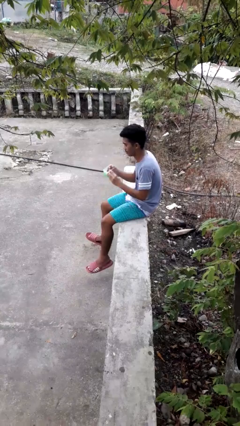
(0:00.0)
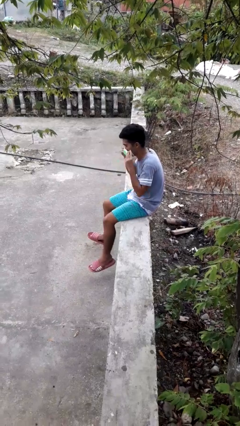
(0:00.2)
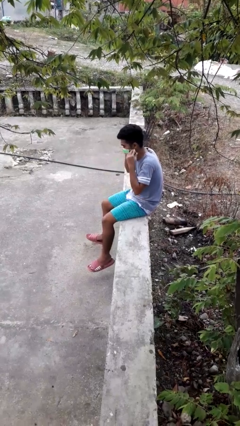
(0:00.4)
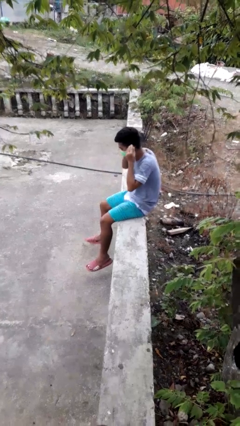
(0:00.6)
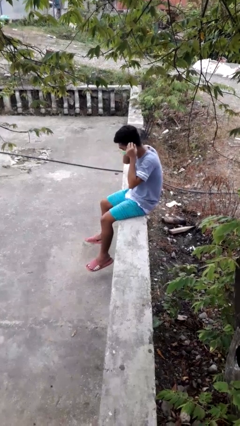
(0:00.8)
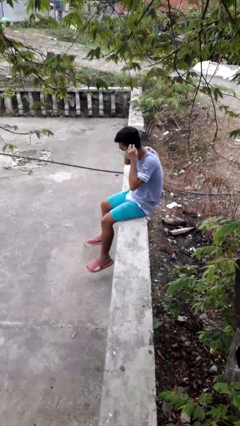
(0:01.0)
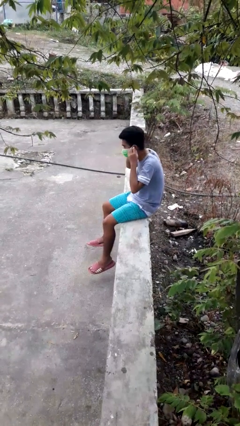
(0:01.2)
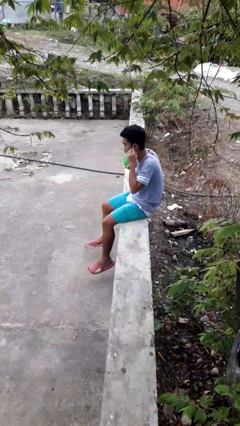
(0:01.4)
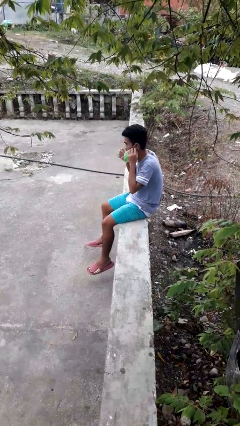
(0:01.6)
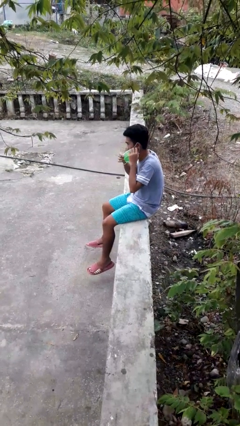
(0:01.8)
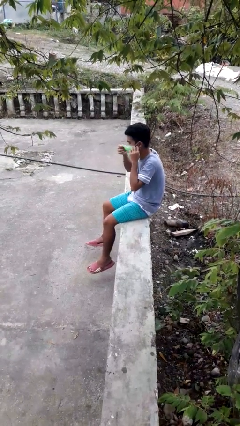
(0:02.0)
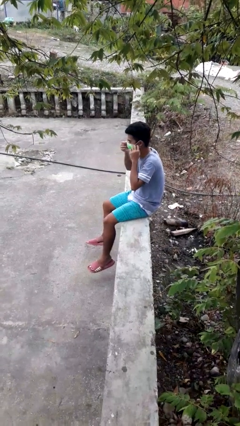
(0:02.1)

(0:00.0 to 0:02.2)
person puts on facemask

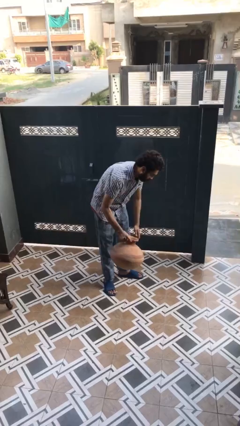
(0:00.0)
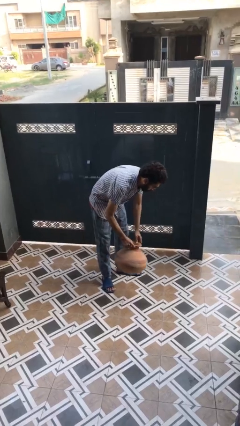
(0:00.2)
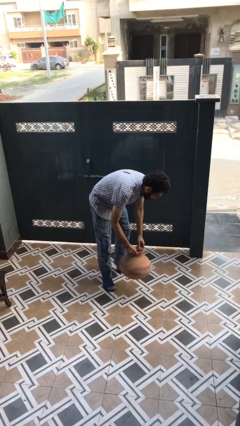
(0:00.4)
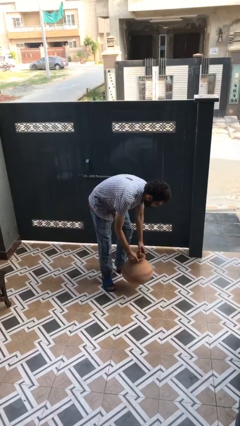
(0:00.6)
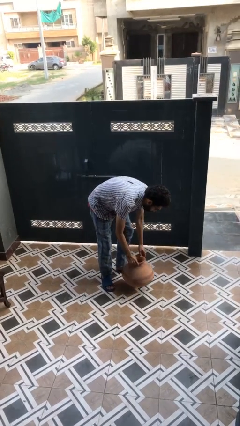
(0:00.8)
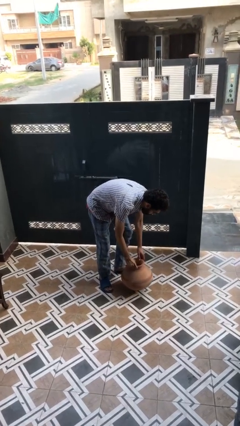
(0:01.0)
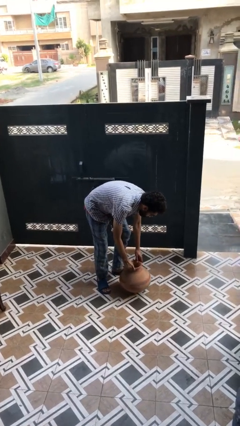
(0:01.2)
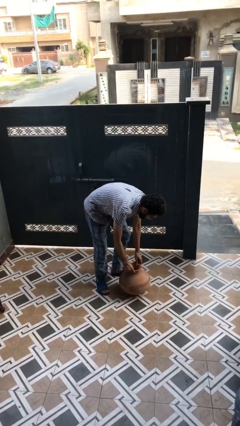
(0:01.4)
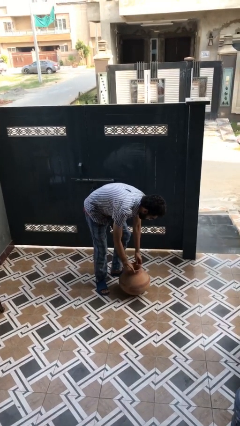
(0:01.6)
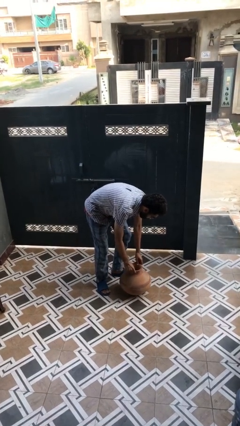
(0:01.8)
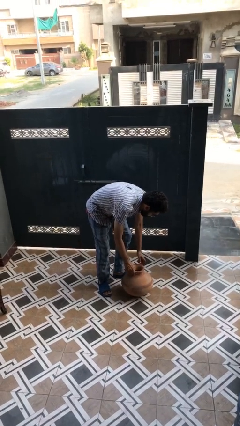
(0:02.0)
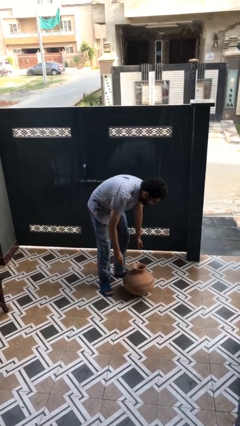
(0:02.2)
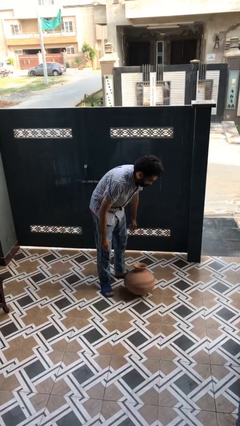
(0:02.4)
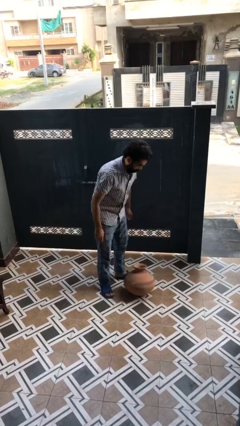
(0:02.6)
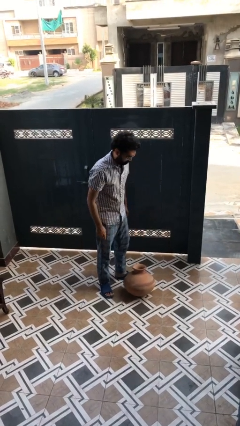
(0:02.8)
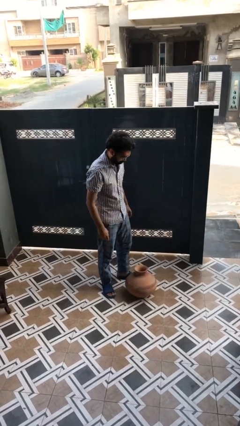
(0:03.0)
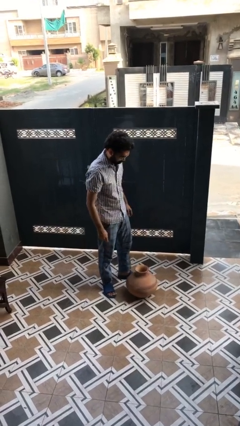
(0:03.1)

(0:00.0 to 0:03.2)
person puts down object on floor

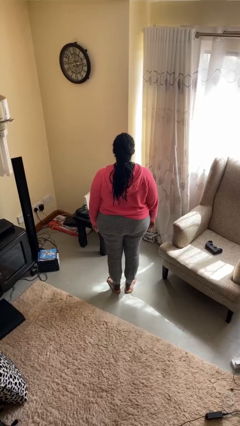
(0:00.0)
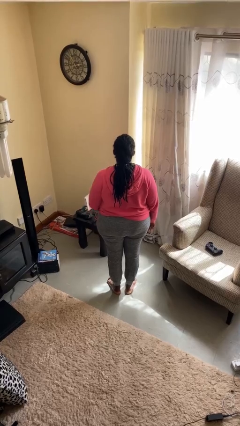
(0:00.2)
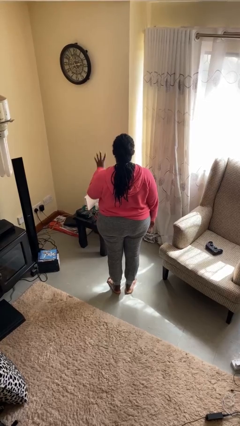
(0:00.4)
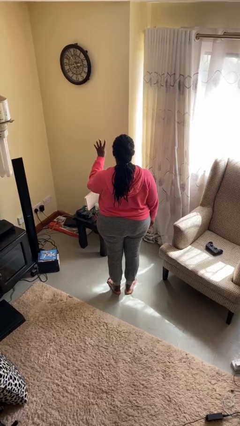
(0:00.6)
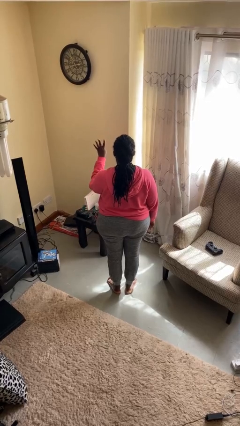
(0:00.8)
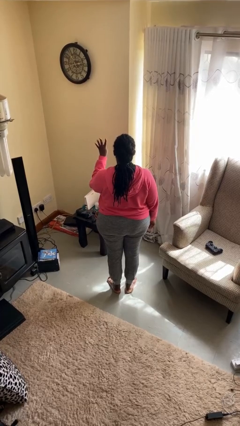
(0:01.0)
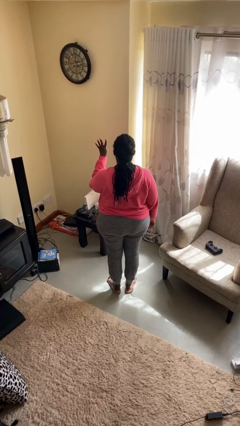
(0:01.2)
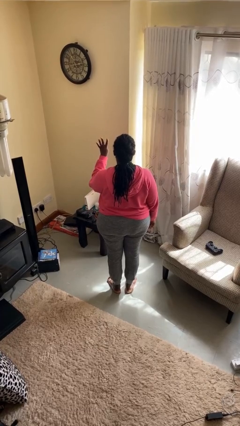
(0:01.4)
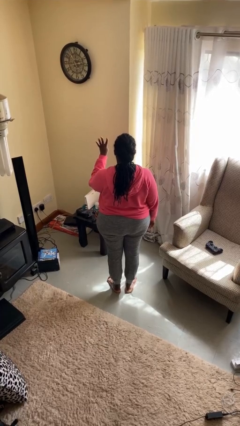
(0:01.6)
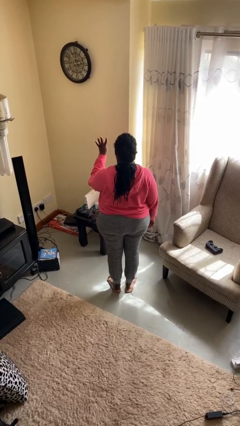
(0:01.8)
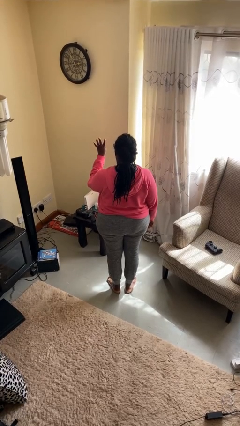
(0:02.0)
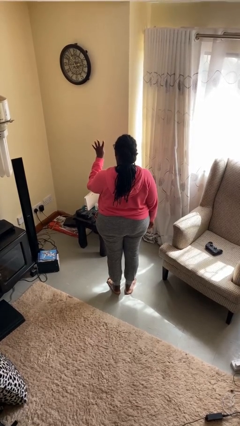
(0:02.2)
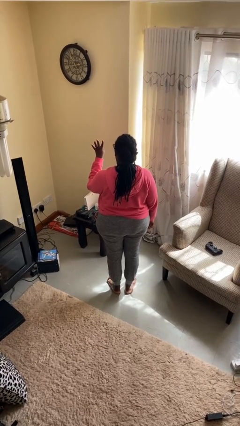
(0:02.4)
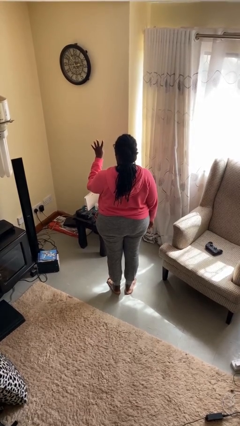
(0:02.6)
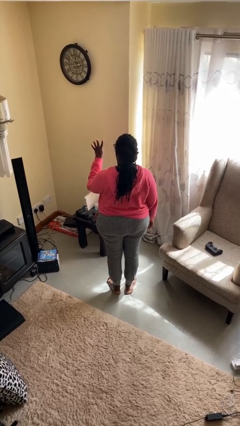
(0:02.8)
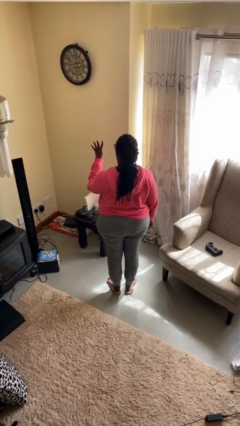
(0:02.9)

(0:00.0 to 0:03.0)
person gestures number four

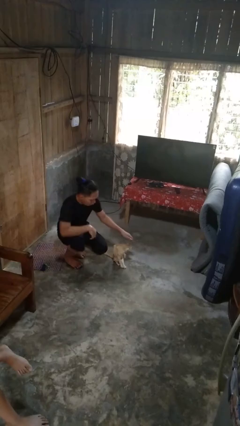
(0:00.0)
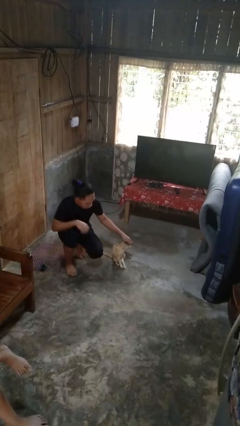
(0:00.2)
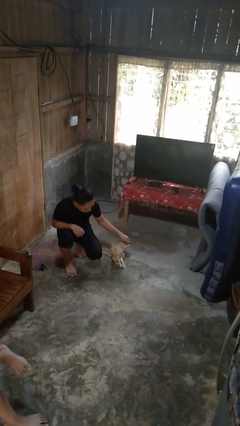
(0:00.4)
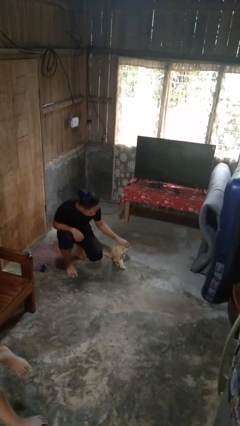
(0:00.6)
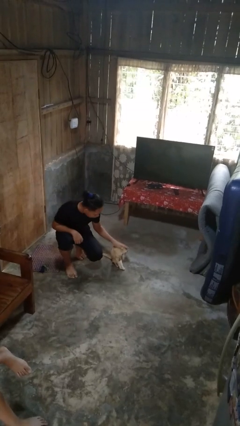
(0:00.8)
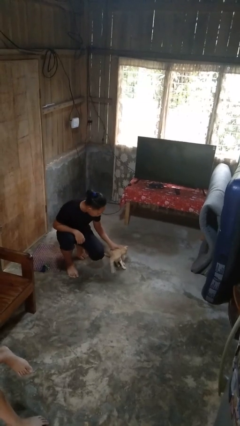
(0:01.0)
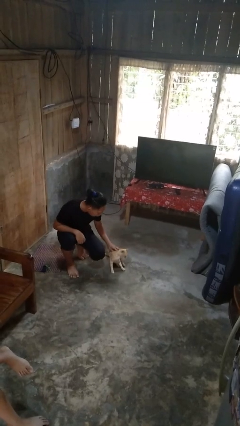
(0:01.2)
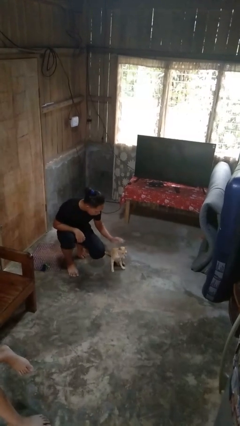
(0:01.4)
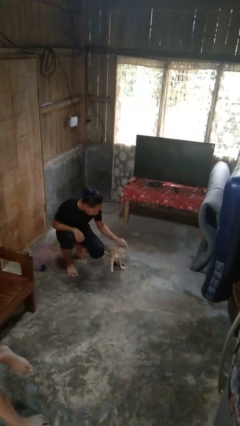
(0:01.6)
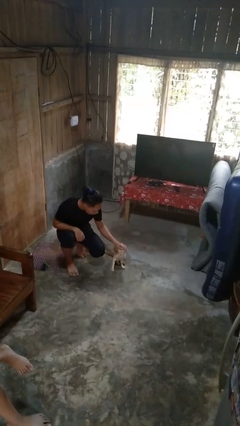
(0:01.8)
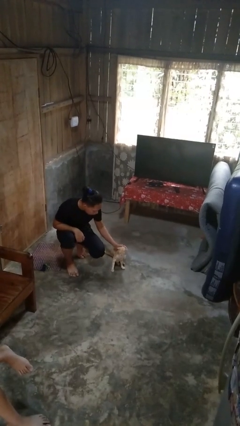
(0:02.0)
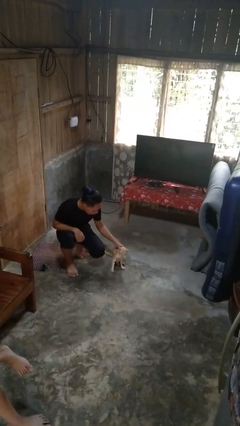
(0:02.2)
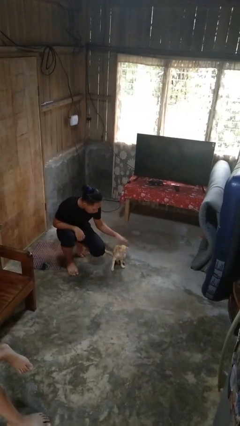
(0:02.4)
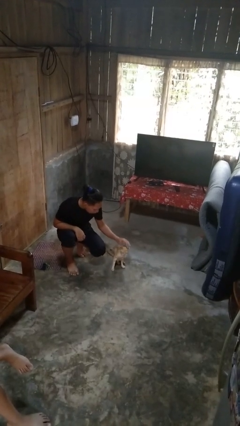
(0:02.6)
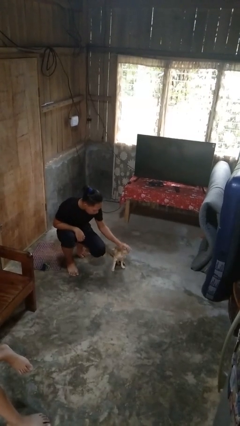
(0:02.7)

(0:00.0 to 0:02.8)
person pets cat

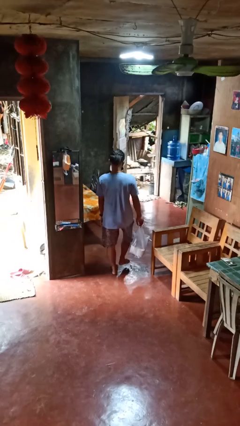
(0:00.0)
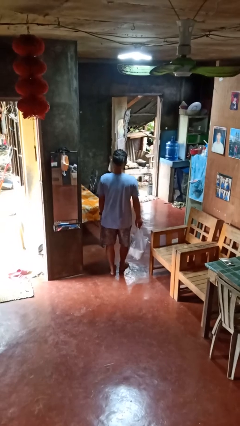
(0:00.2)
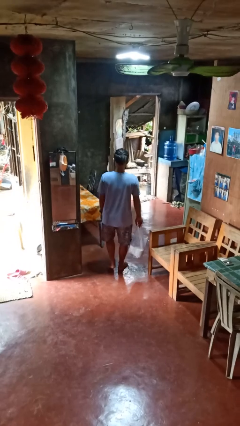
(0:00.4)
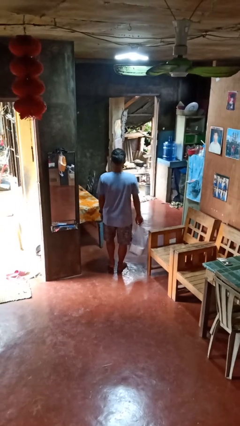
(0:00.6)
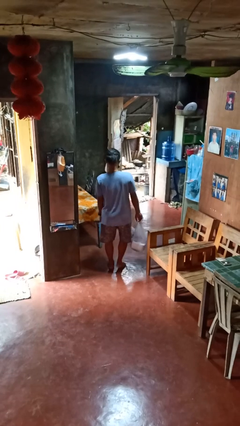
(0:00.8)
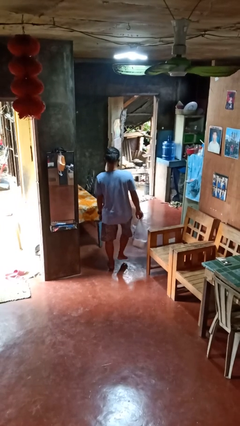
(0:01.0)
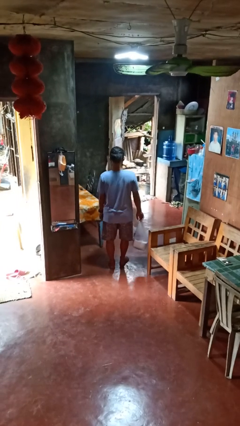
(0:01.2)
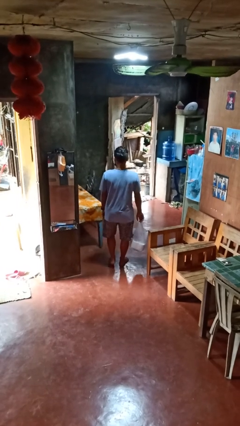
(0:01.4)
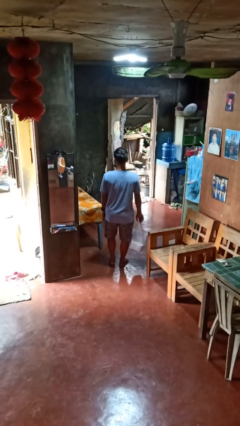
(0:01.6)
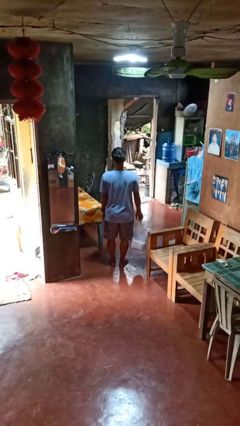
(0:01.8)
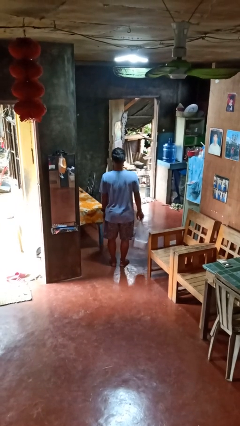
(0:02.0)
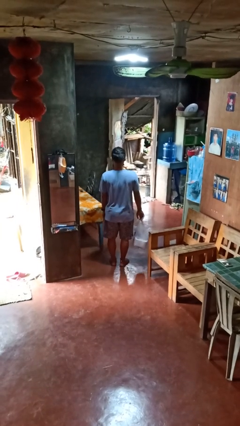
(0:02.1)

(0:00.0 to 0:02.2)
person carries groceries

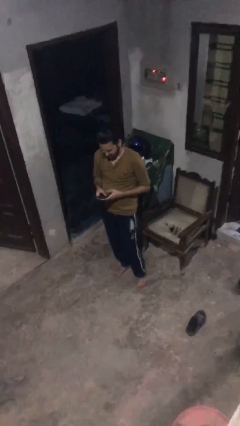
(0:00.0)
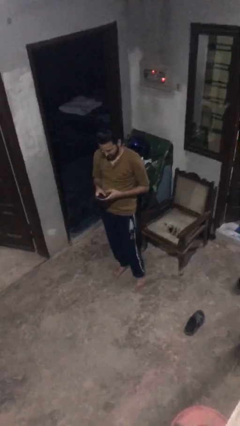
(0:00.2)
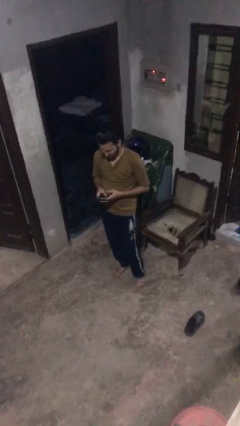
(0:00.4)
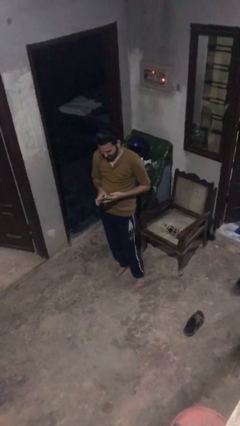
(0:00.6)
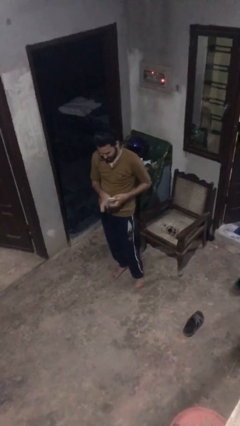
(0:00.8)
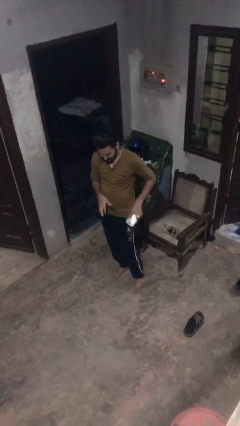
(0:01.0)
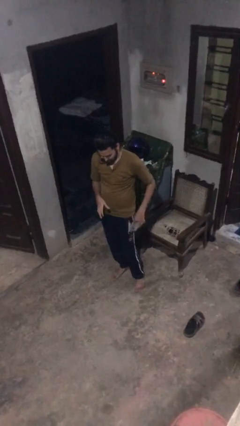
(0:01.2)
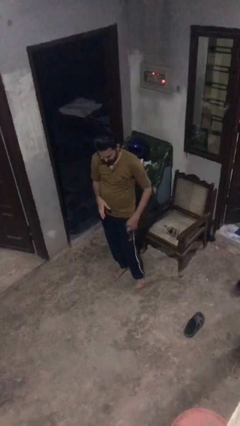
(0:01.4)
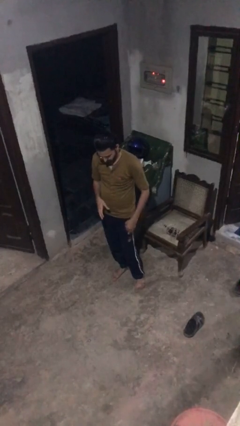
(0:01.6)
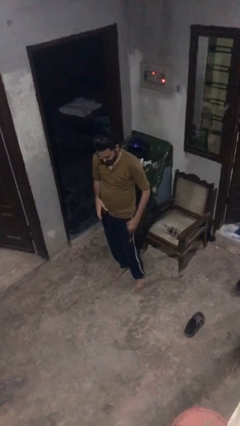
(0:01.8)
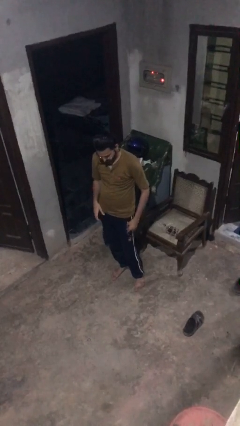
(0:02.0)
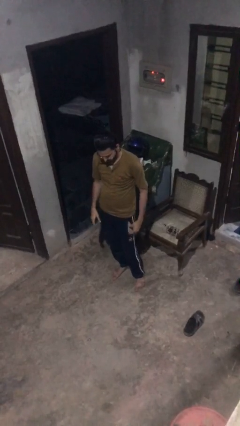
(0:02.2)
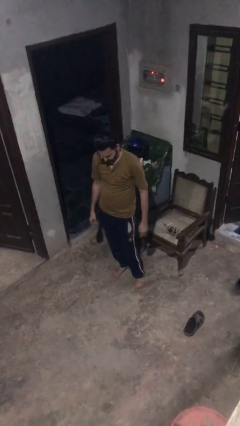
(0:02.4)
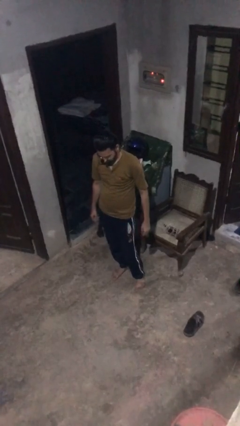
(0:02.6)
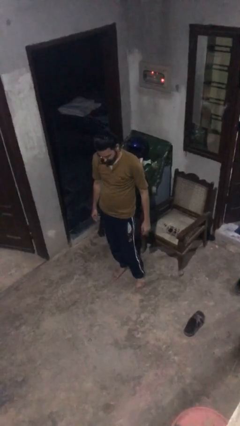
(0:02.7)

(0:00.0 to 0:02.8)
person puts phone into pocket

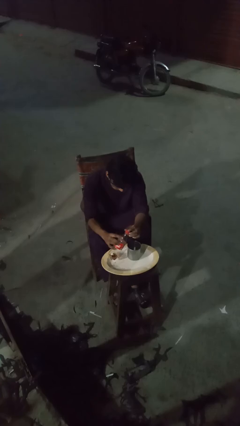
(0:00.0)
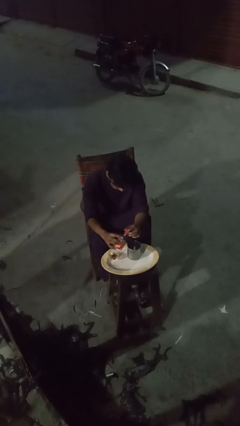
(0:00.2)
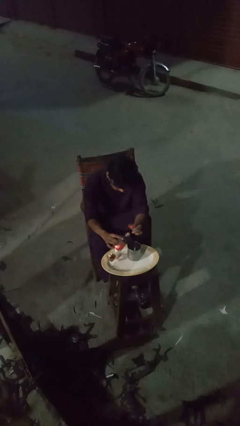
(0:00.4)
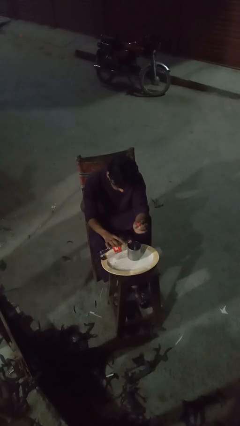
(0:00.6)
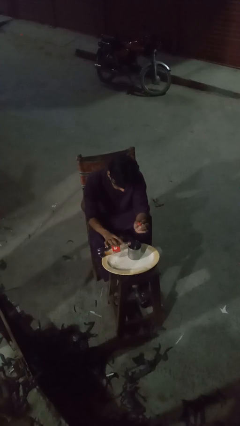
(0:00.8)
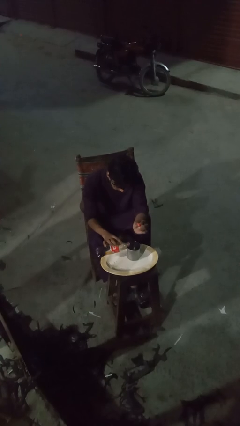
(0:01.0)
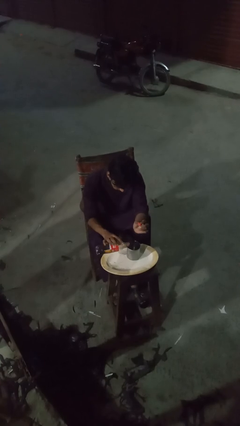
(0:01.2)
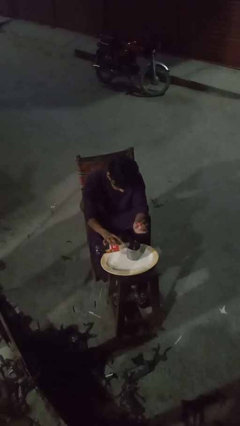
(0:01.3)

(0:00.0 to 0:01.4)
person pours liquid into cup
